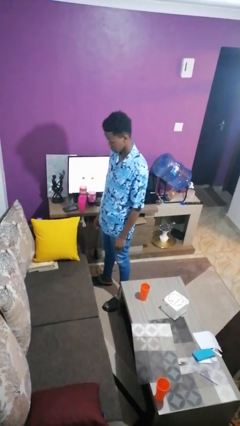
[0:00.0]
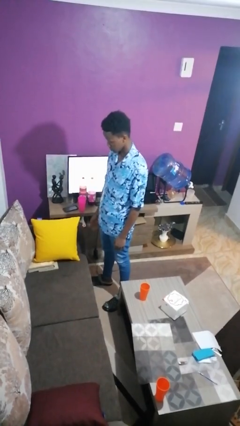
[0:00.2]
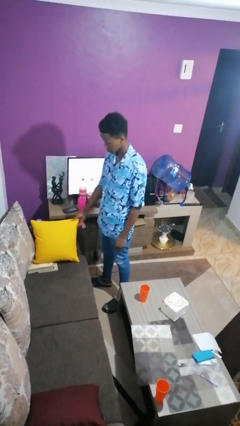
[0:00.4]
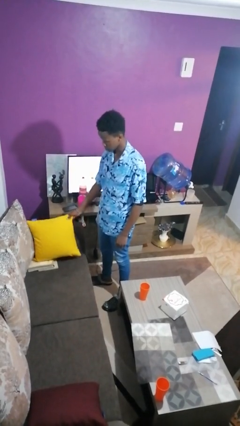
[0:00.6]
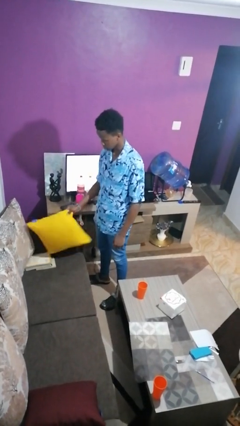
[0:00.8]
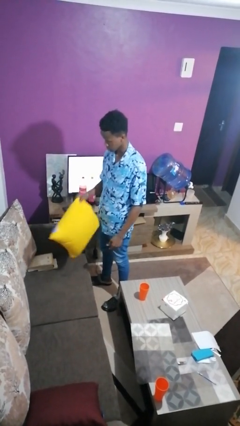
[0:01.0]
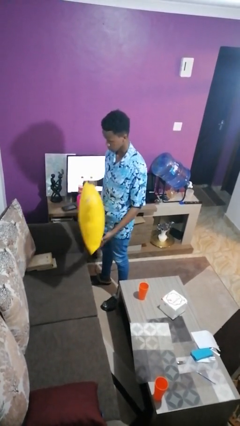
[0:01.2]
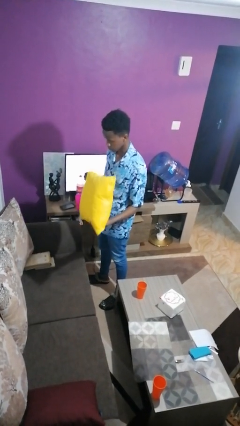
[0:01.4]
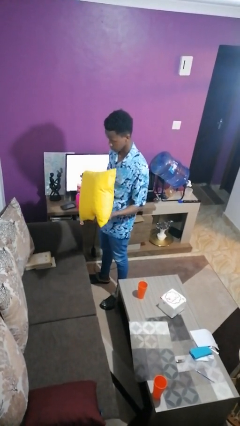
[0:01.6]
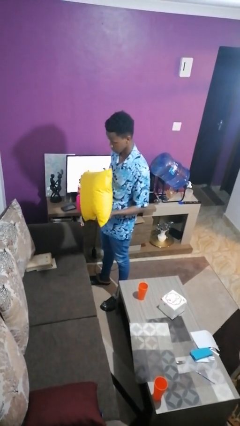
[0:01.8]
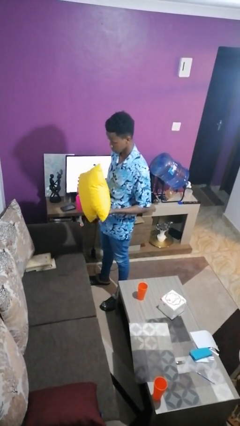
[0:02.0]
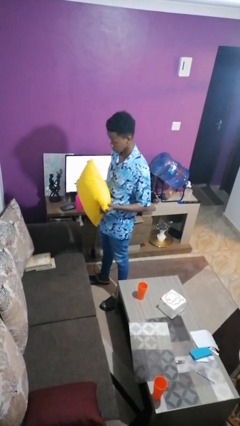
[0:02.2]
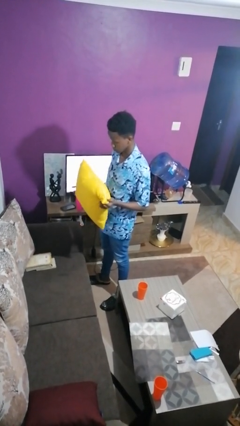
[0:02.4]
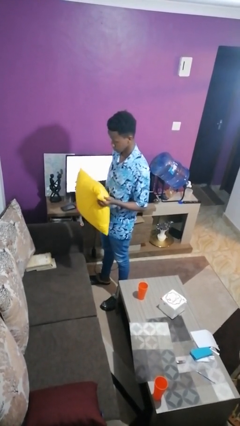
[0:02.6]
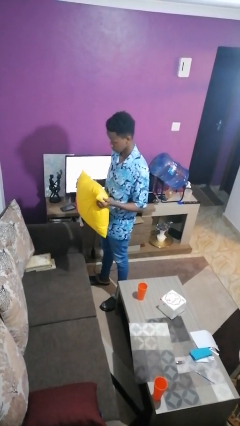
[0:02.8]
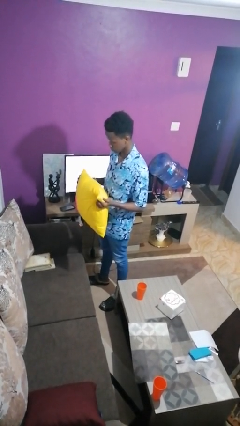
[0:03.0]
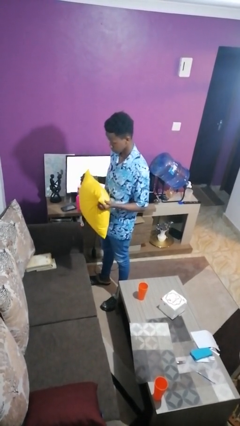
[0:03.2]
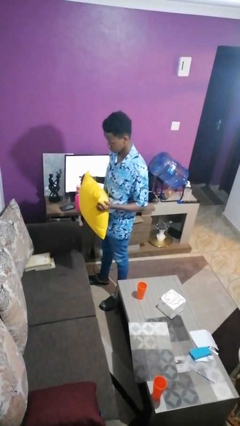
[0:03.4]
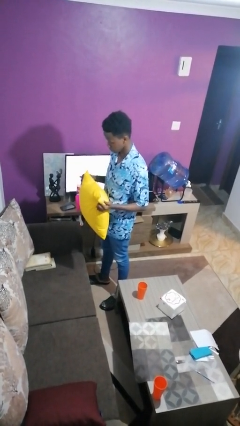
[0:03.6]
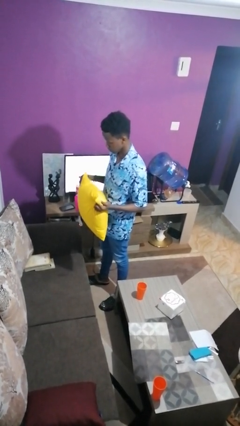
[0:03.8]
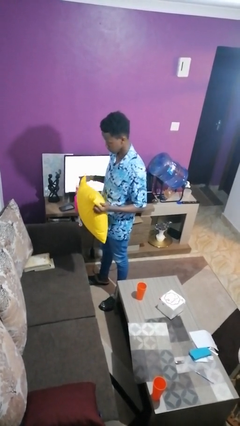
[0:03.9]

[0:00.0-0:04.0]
person picks up object from couch

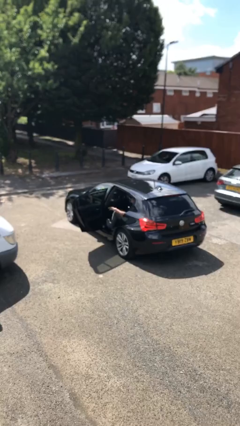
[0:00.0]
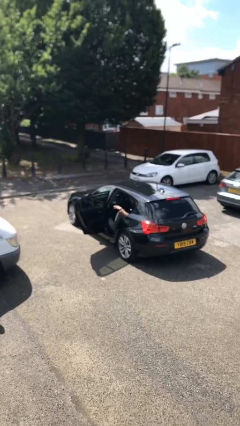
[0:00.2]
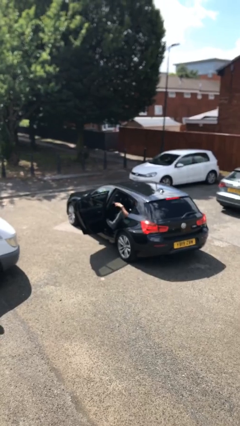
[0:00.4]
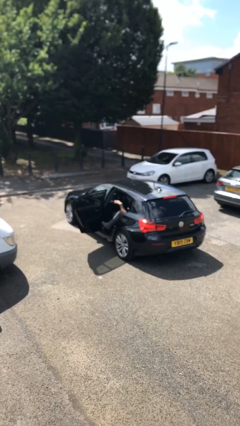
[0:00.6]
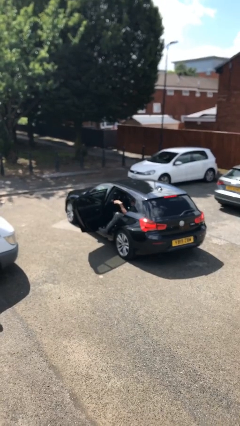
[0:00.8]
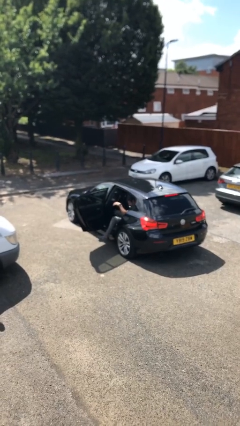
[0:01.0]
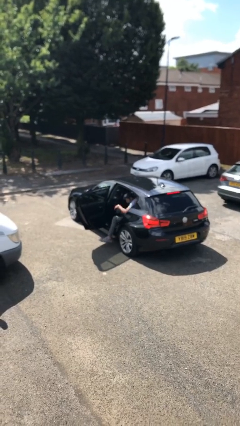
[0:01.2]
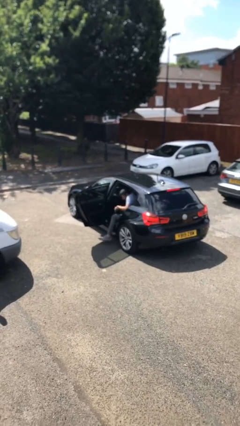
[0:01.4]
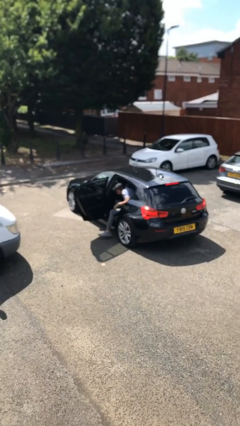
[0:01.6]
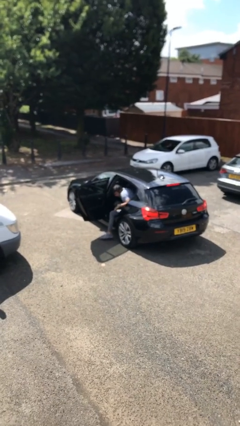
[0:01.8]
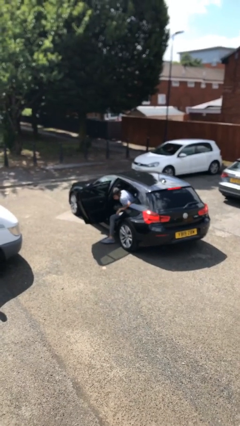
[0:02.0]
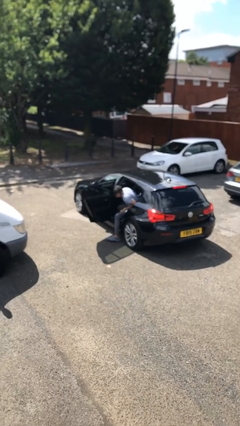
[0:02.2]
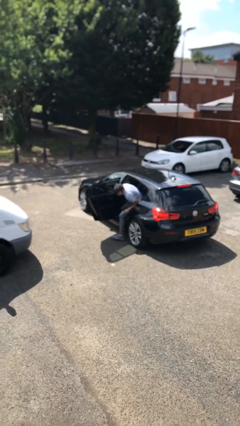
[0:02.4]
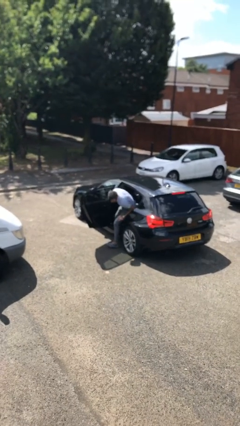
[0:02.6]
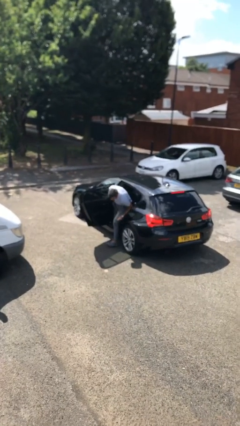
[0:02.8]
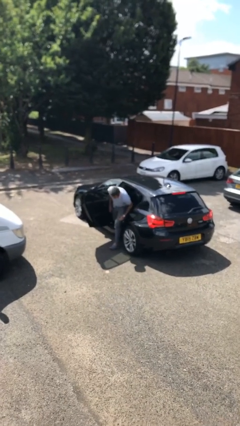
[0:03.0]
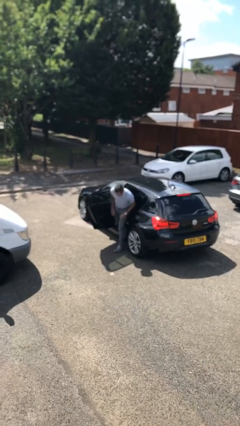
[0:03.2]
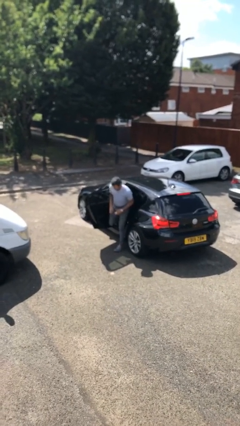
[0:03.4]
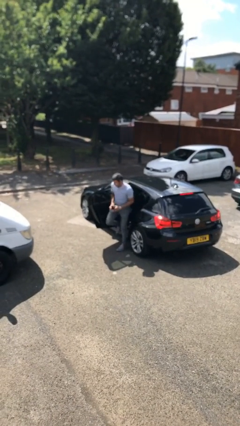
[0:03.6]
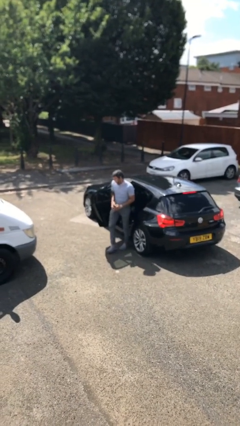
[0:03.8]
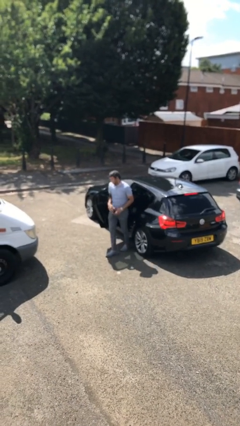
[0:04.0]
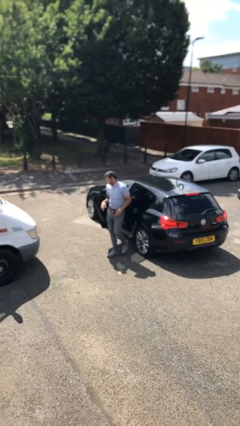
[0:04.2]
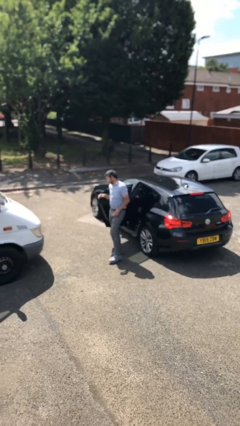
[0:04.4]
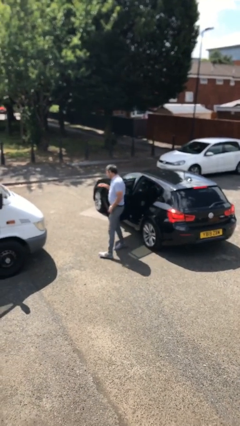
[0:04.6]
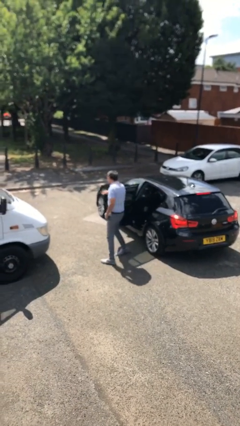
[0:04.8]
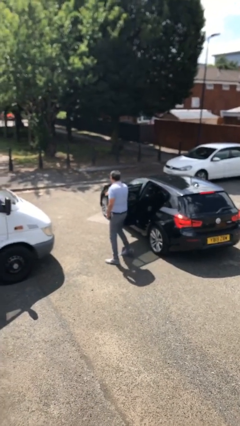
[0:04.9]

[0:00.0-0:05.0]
person exits car

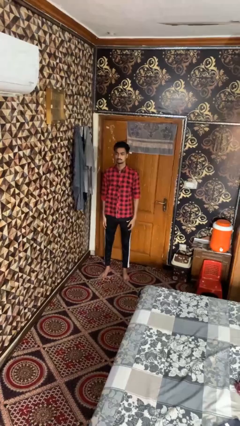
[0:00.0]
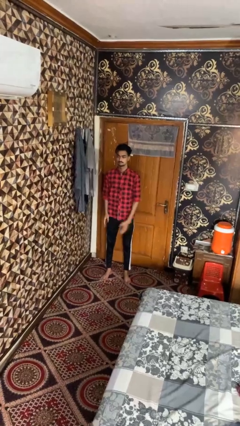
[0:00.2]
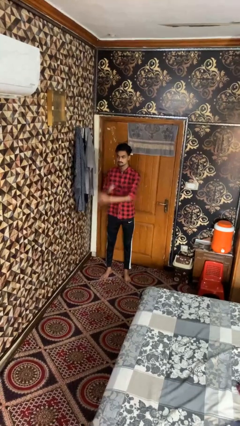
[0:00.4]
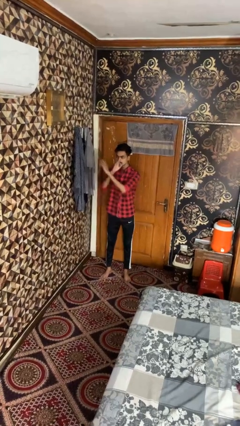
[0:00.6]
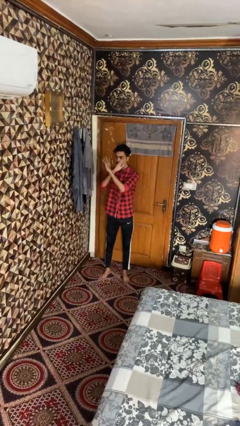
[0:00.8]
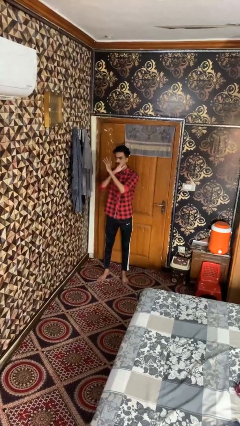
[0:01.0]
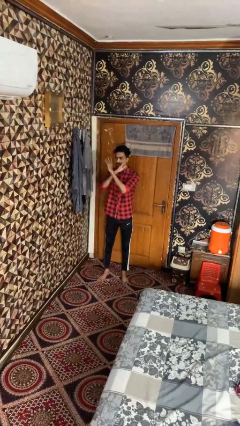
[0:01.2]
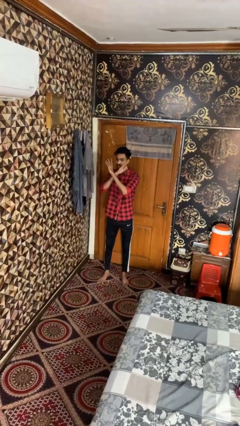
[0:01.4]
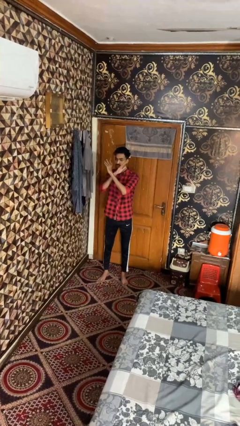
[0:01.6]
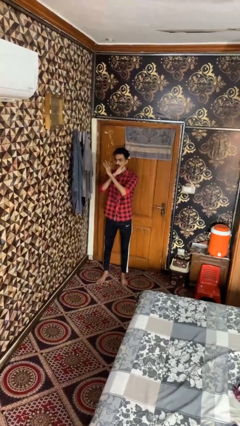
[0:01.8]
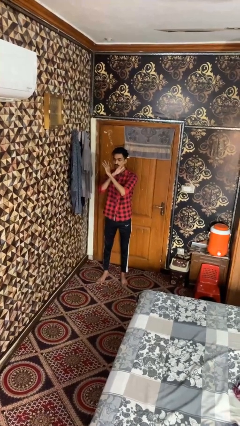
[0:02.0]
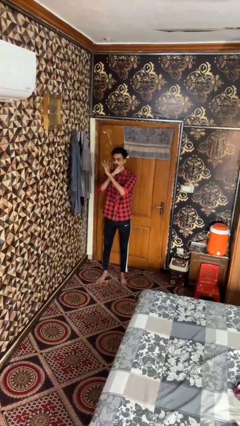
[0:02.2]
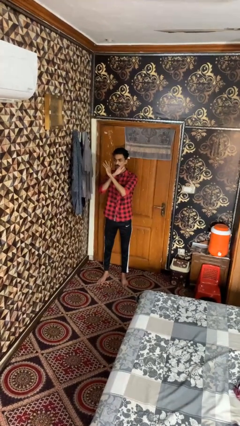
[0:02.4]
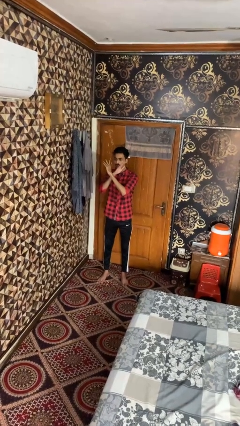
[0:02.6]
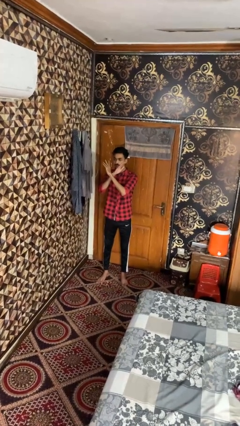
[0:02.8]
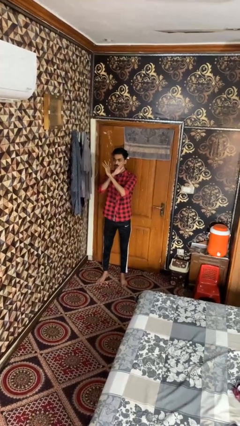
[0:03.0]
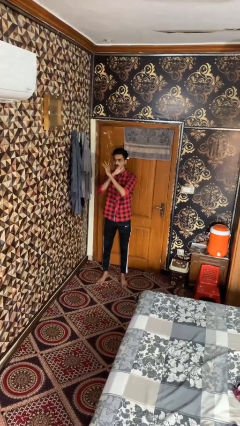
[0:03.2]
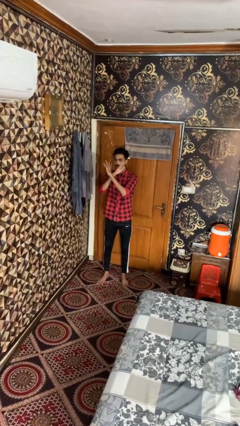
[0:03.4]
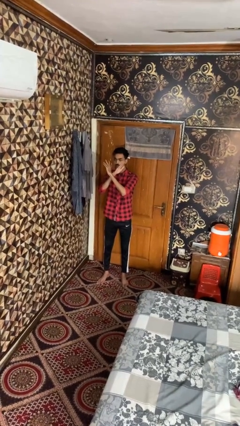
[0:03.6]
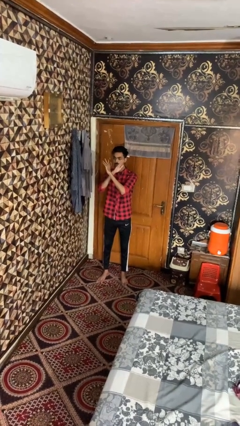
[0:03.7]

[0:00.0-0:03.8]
person gestures arms x

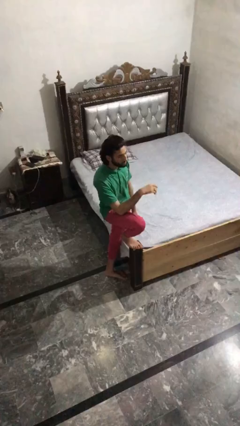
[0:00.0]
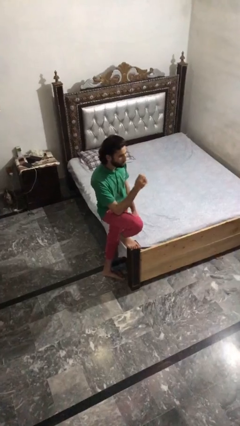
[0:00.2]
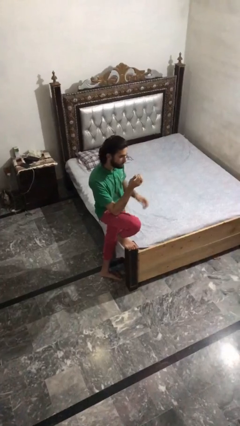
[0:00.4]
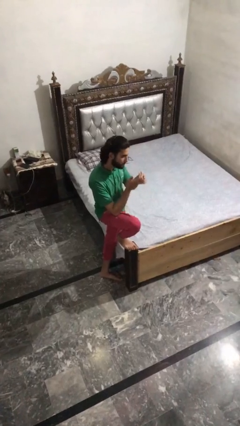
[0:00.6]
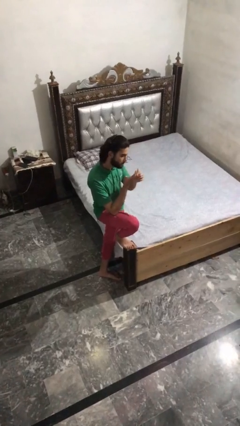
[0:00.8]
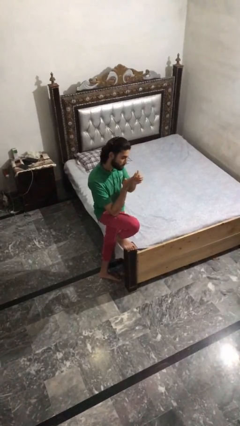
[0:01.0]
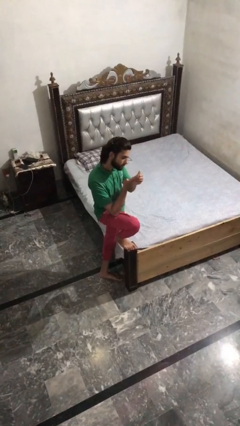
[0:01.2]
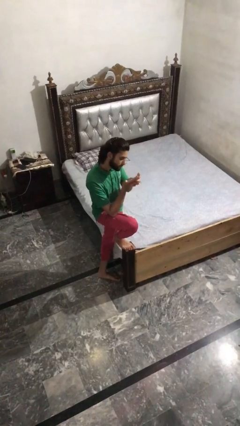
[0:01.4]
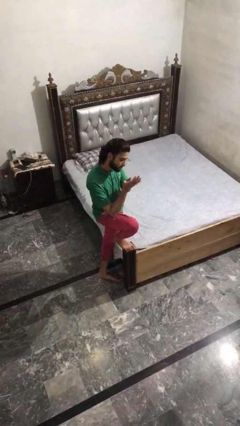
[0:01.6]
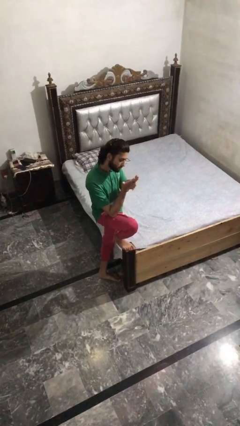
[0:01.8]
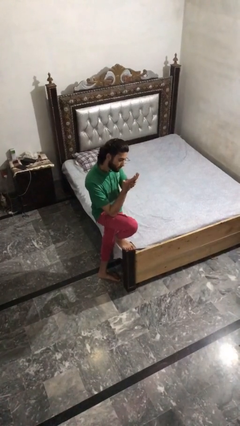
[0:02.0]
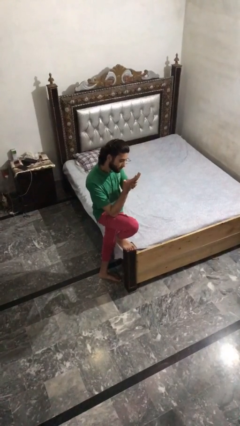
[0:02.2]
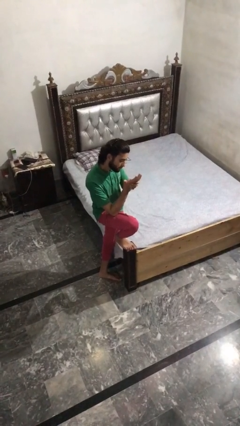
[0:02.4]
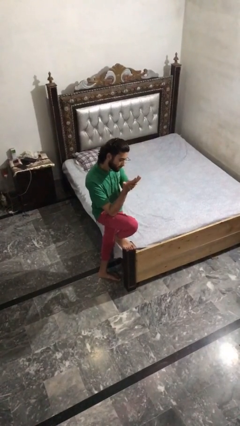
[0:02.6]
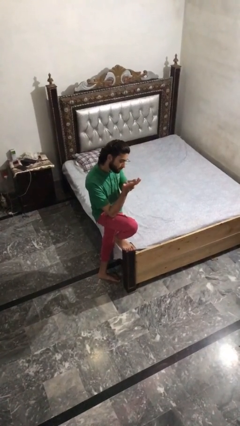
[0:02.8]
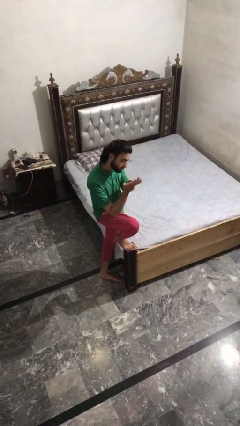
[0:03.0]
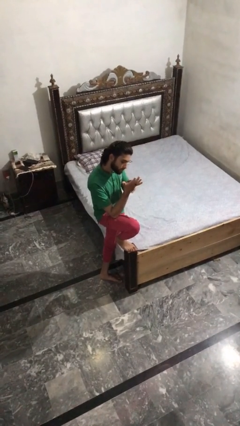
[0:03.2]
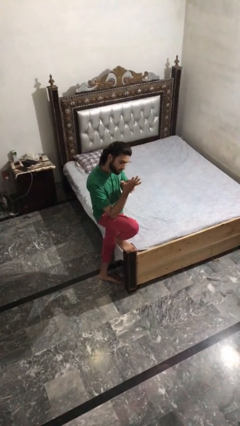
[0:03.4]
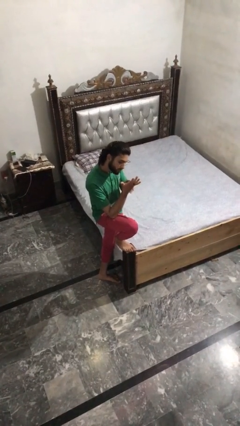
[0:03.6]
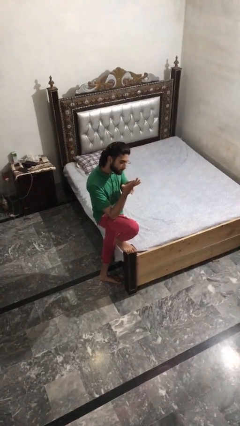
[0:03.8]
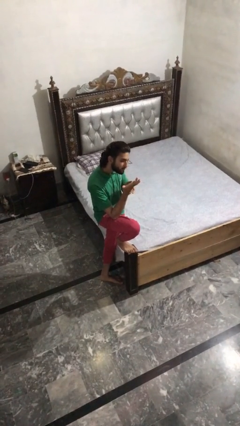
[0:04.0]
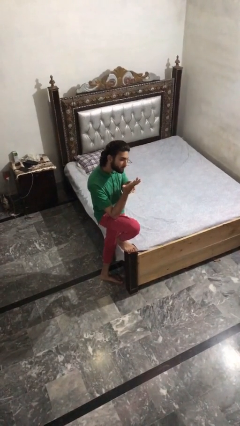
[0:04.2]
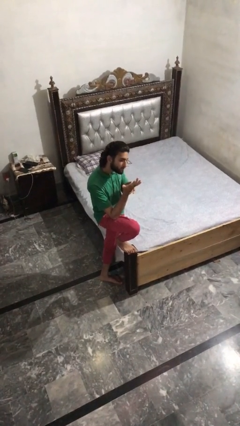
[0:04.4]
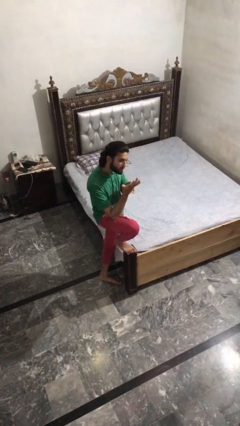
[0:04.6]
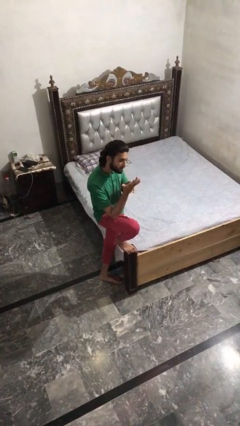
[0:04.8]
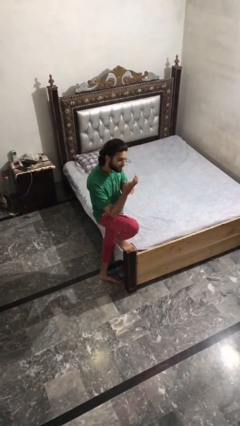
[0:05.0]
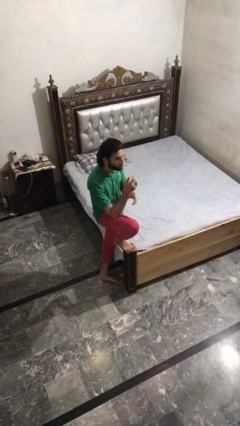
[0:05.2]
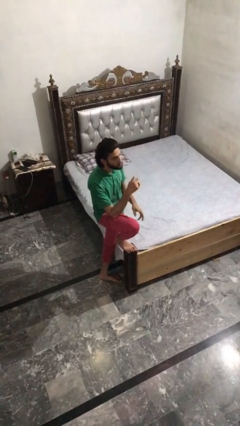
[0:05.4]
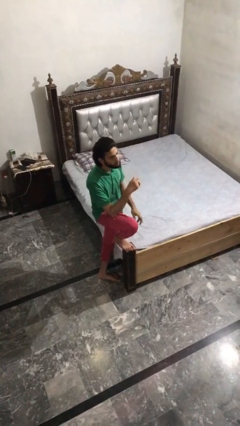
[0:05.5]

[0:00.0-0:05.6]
person looks at hands in lap
